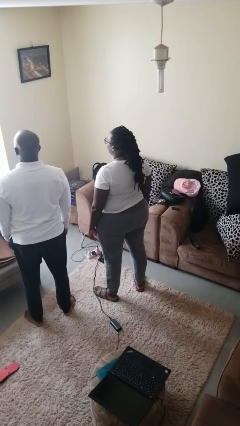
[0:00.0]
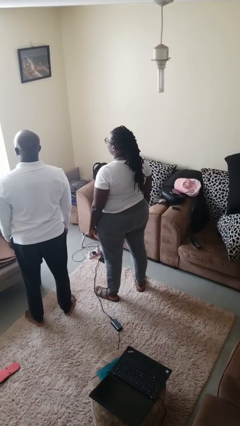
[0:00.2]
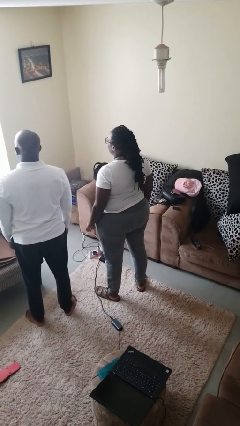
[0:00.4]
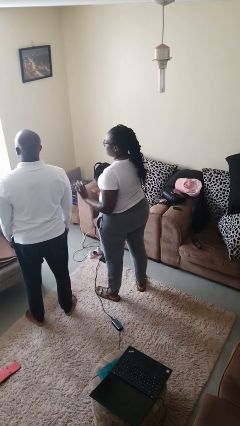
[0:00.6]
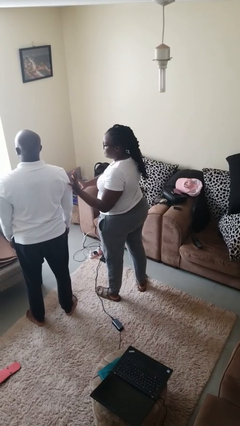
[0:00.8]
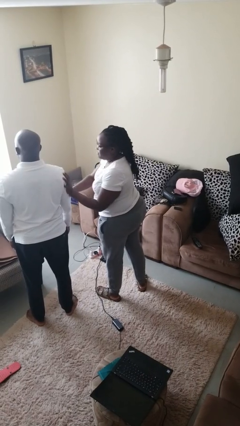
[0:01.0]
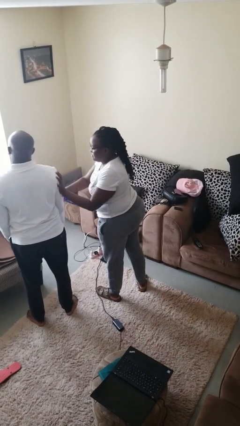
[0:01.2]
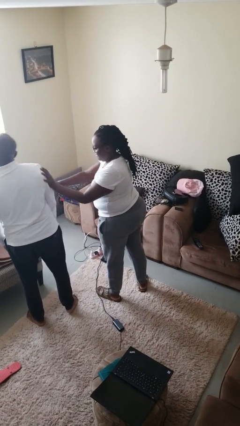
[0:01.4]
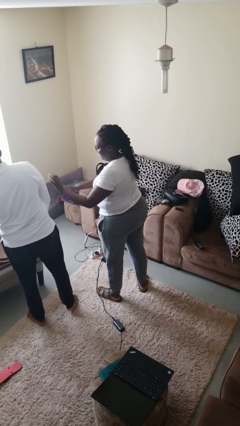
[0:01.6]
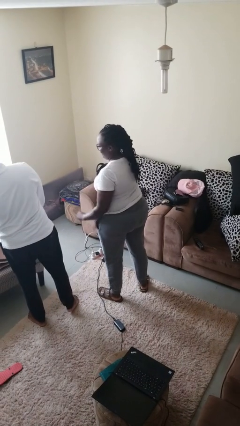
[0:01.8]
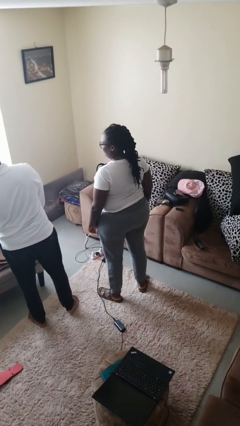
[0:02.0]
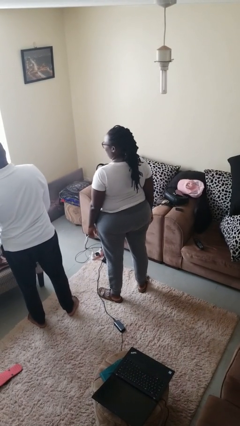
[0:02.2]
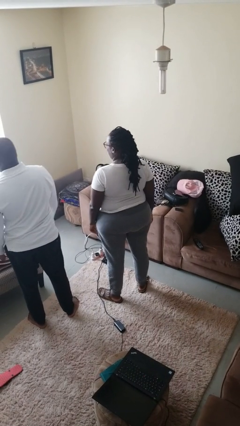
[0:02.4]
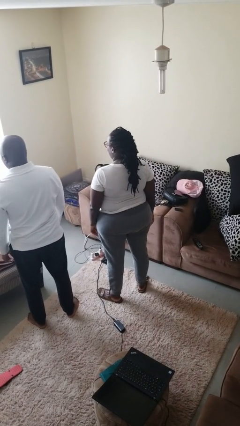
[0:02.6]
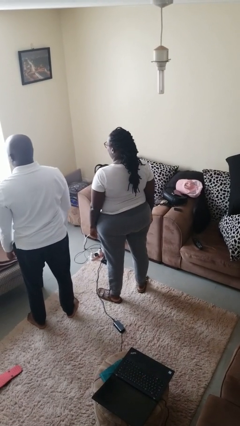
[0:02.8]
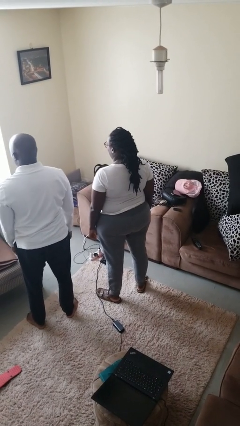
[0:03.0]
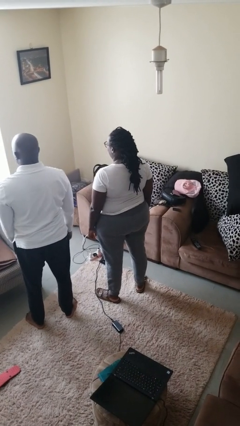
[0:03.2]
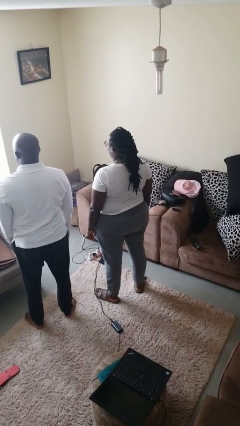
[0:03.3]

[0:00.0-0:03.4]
person shoves person

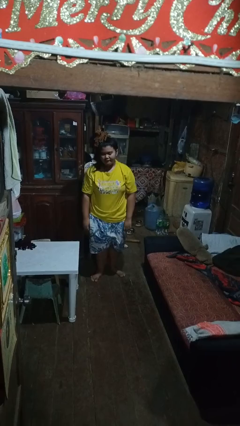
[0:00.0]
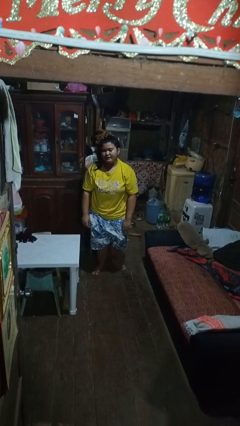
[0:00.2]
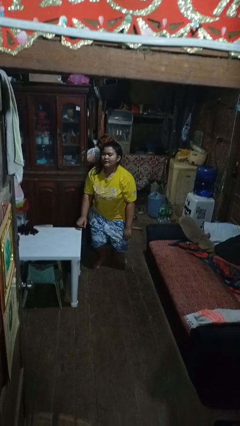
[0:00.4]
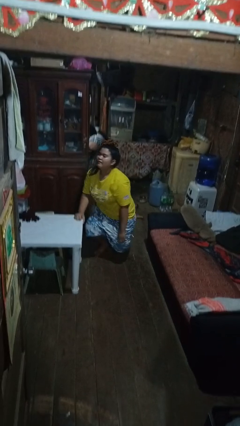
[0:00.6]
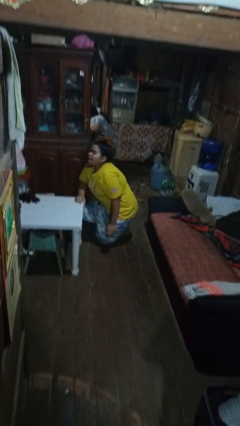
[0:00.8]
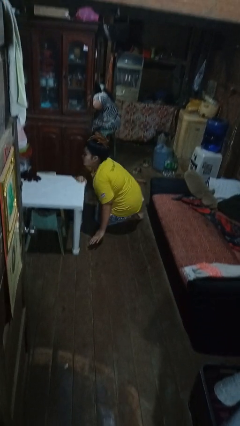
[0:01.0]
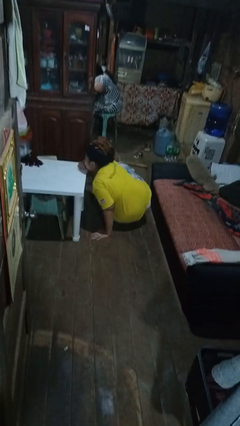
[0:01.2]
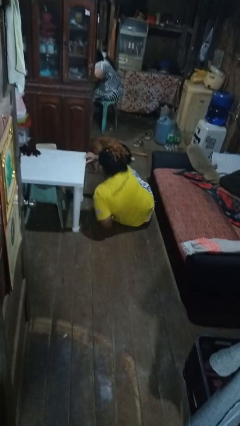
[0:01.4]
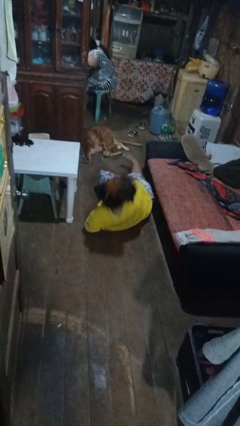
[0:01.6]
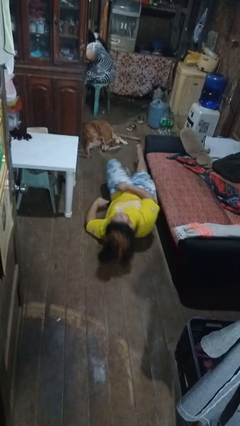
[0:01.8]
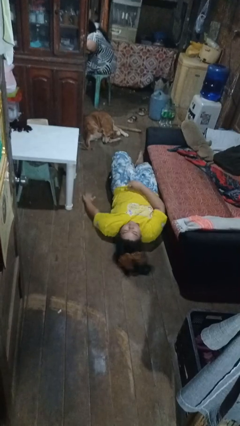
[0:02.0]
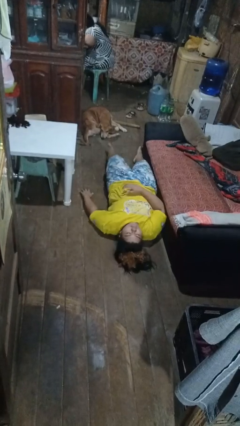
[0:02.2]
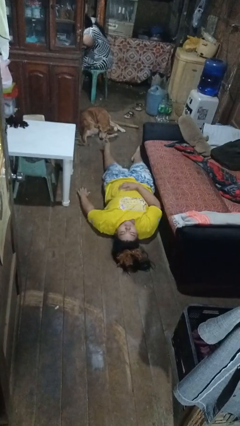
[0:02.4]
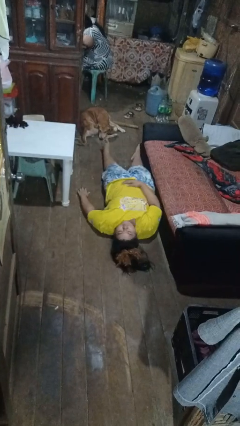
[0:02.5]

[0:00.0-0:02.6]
person falls while standing

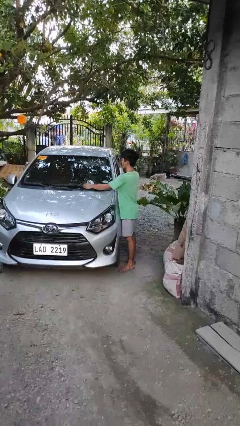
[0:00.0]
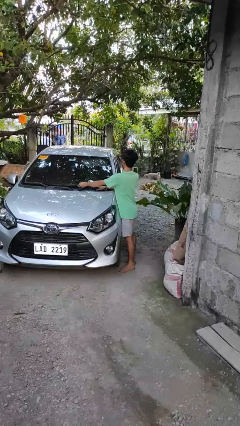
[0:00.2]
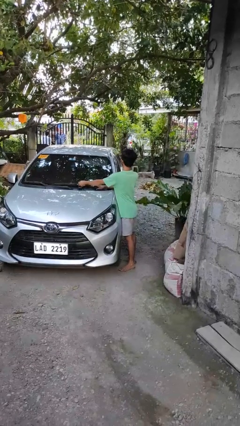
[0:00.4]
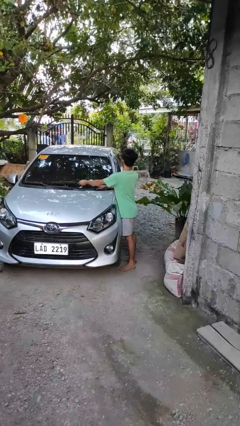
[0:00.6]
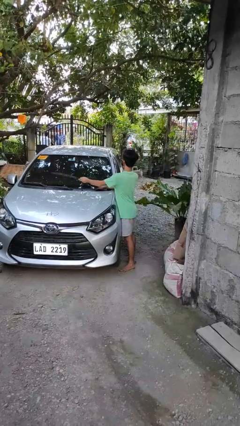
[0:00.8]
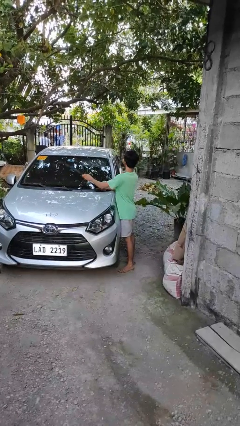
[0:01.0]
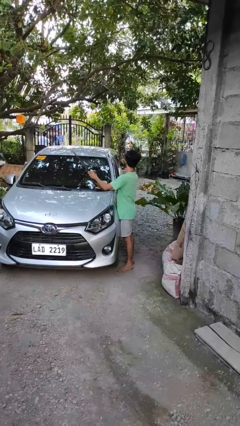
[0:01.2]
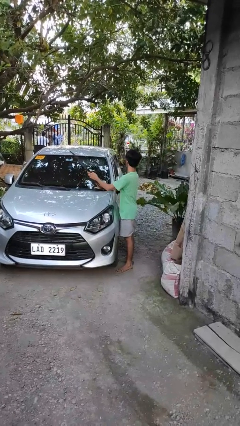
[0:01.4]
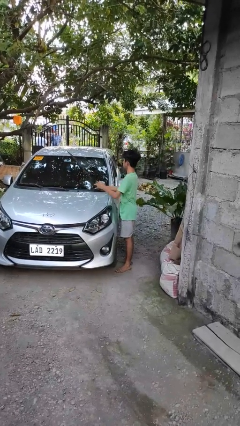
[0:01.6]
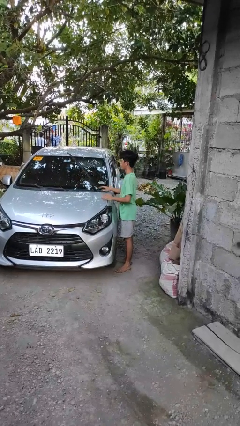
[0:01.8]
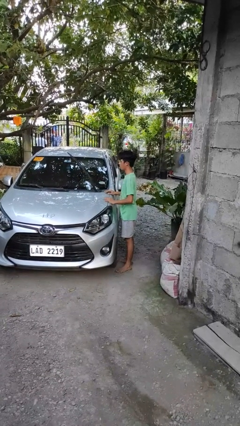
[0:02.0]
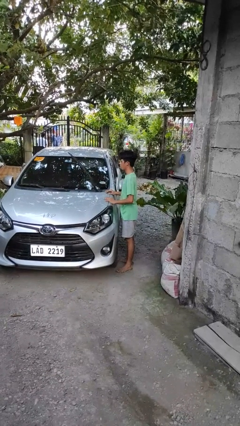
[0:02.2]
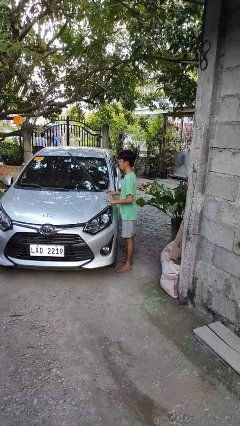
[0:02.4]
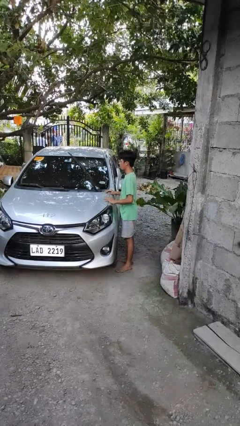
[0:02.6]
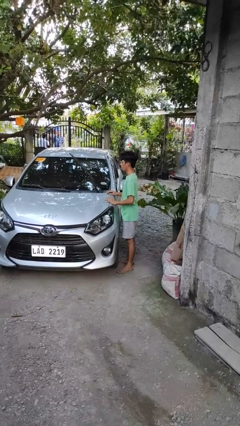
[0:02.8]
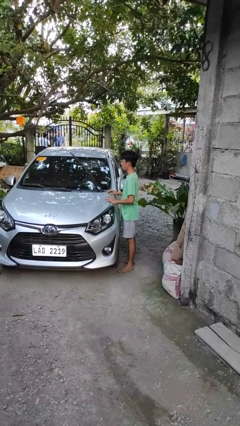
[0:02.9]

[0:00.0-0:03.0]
person flips up car wipers

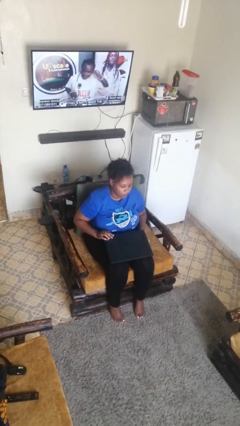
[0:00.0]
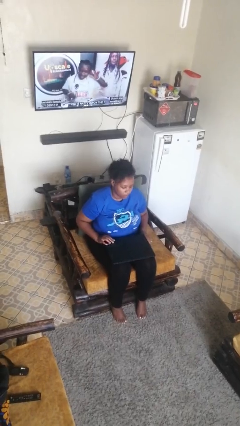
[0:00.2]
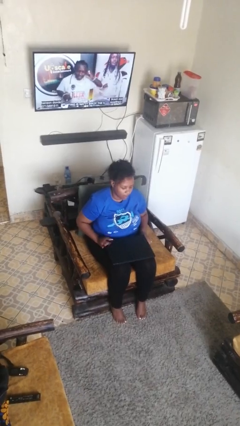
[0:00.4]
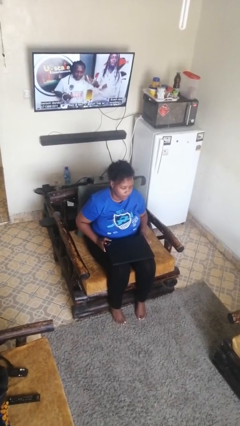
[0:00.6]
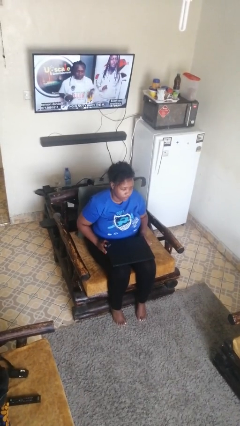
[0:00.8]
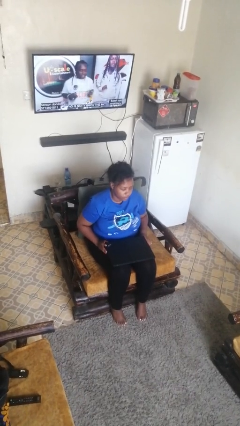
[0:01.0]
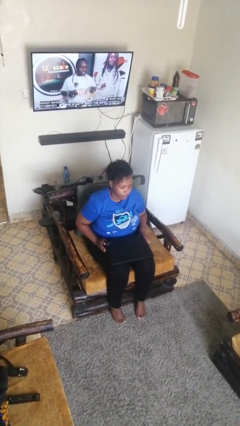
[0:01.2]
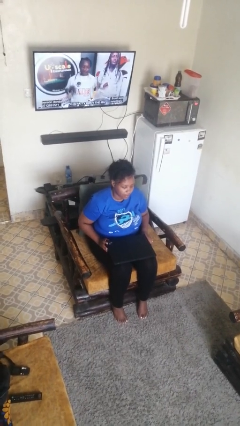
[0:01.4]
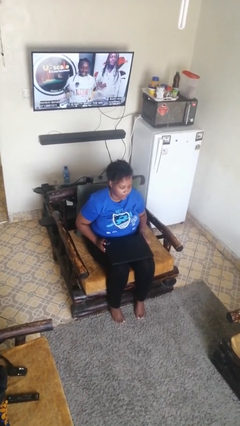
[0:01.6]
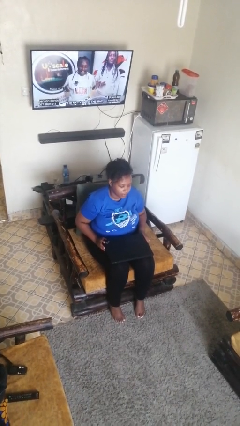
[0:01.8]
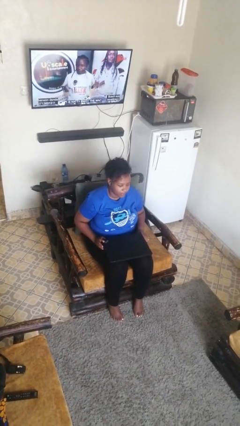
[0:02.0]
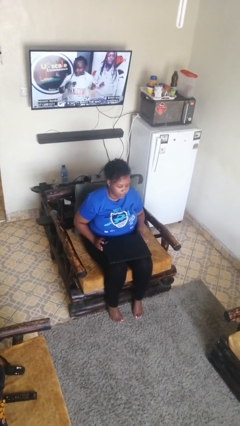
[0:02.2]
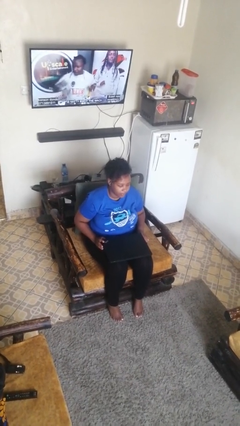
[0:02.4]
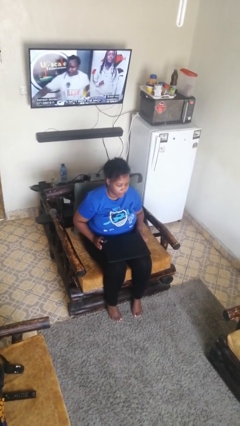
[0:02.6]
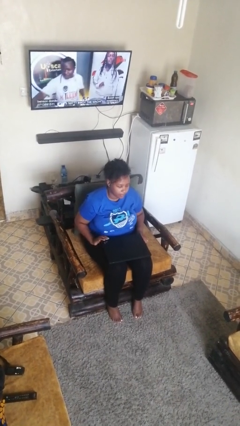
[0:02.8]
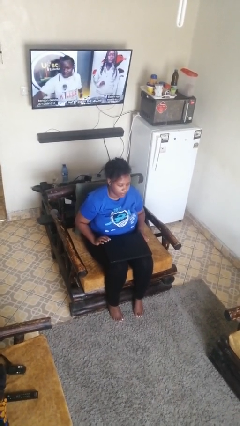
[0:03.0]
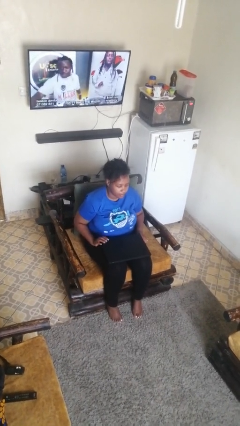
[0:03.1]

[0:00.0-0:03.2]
person closes laptop

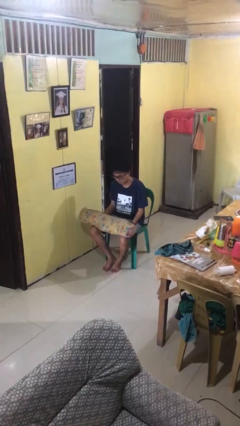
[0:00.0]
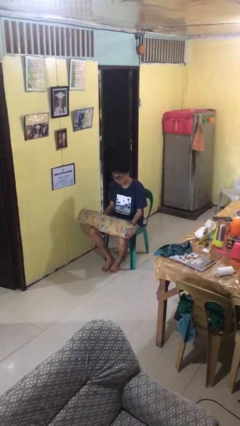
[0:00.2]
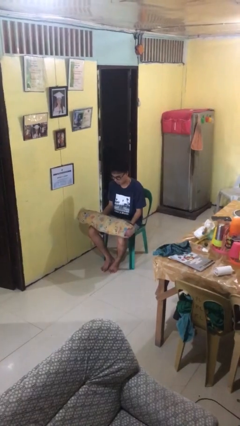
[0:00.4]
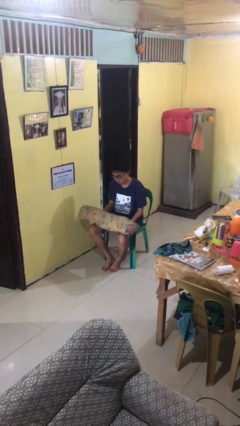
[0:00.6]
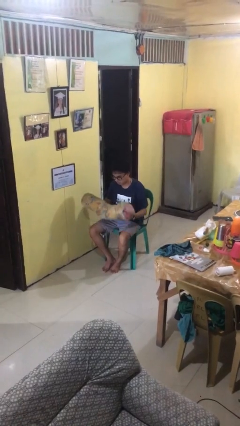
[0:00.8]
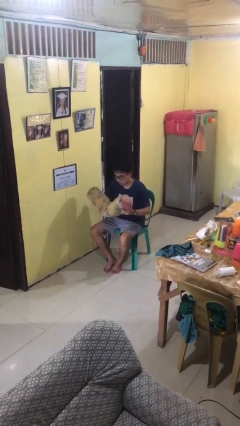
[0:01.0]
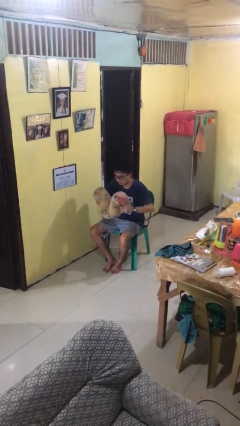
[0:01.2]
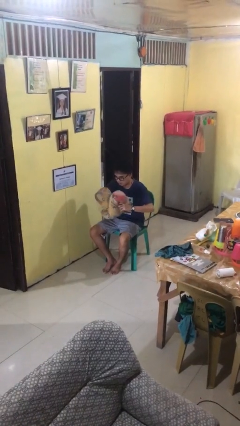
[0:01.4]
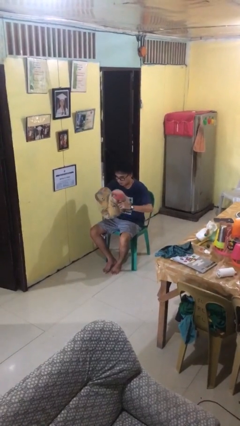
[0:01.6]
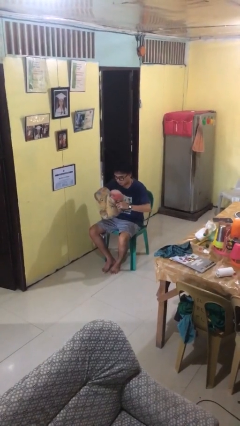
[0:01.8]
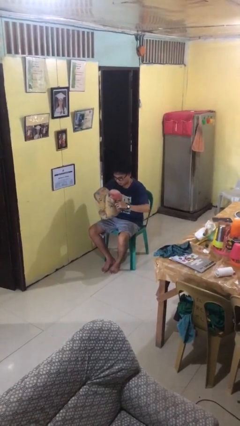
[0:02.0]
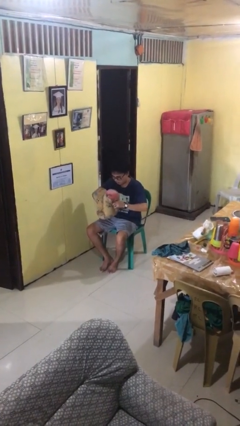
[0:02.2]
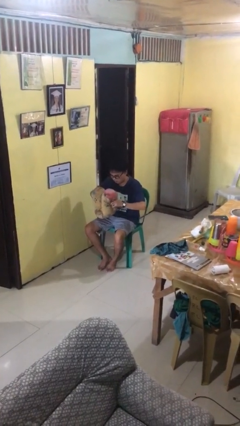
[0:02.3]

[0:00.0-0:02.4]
person squeezes object

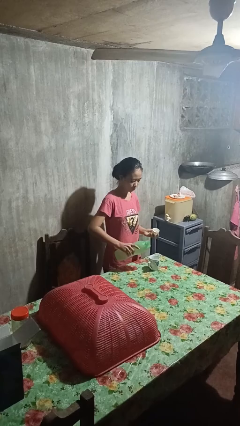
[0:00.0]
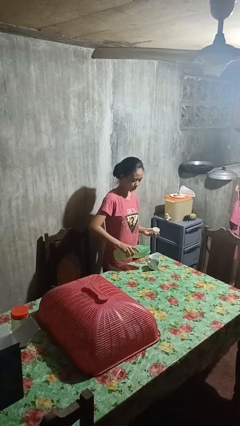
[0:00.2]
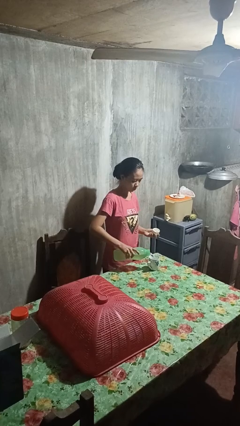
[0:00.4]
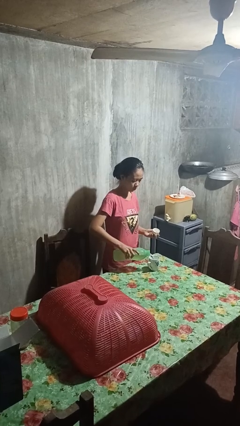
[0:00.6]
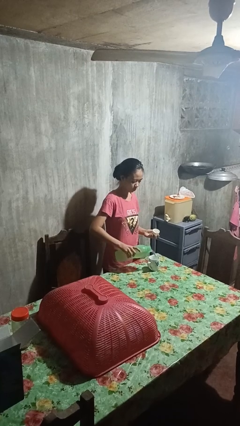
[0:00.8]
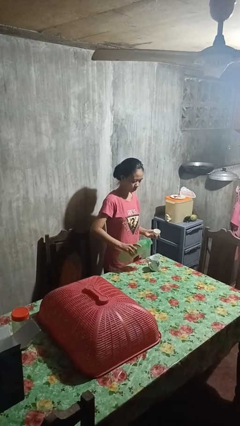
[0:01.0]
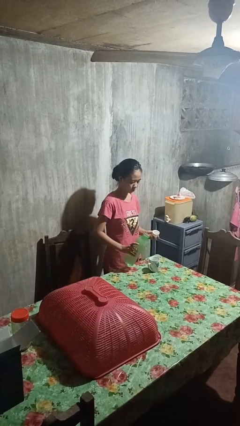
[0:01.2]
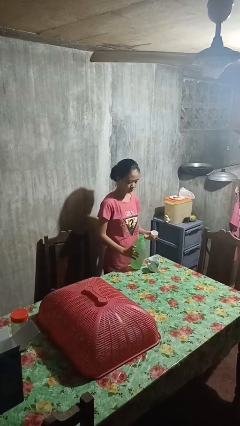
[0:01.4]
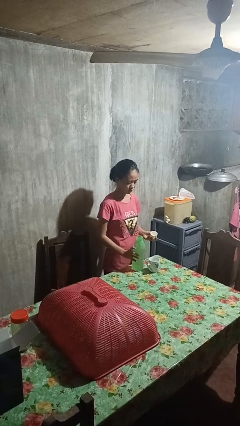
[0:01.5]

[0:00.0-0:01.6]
person pours liquid into cup

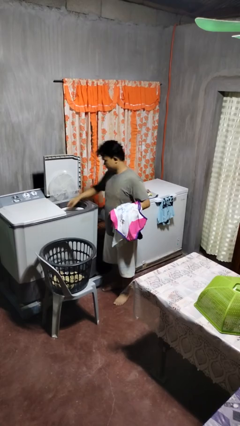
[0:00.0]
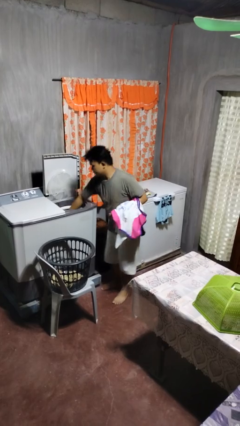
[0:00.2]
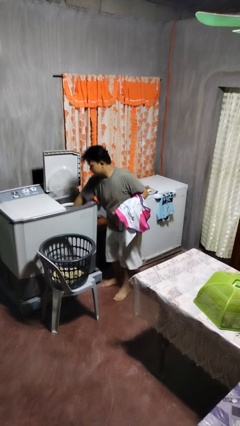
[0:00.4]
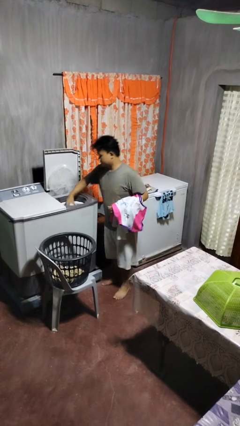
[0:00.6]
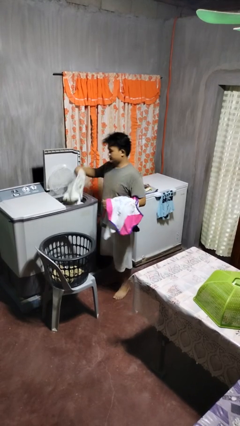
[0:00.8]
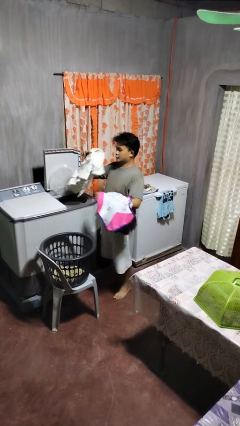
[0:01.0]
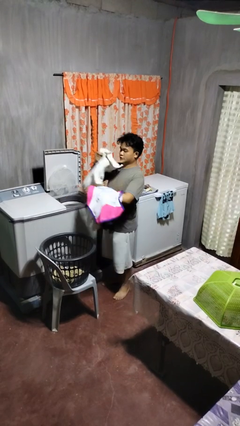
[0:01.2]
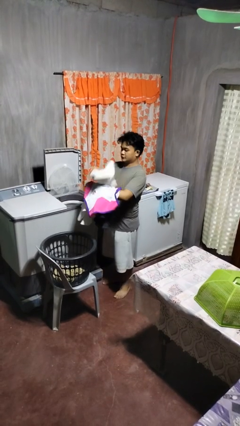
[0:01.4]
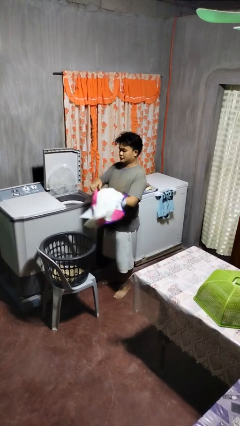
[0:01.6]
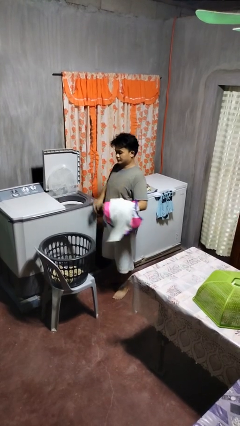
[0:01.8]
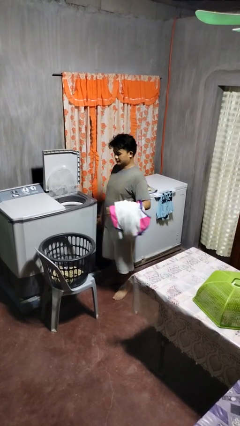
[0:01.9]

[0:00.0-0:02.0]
person unloads dryer
